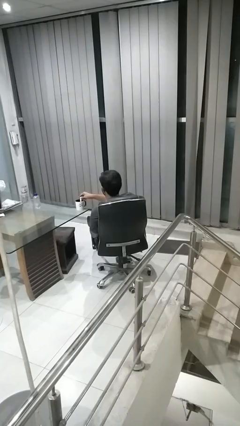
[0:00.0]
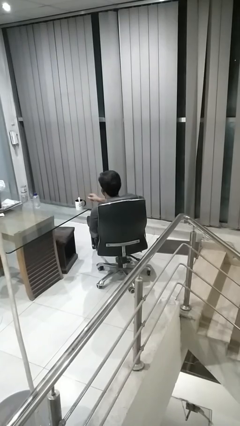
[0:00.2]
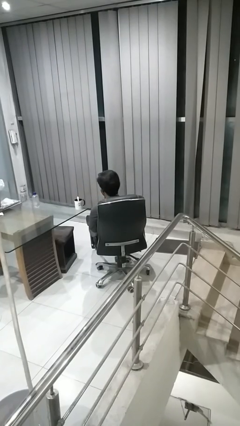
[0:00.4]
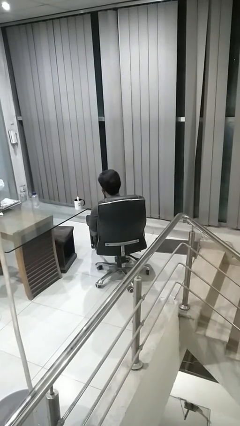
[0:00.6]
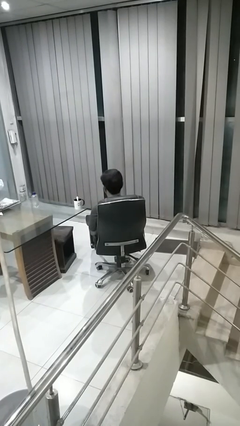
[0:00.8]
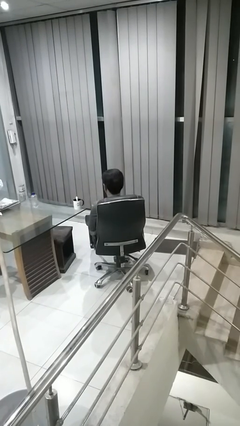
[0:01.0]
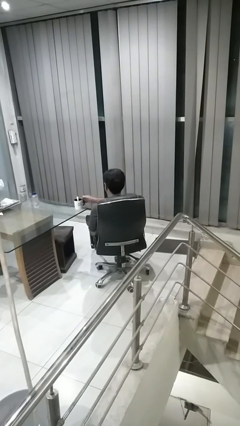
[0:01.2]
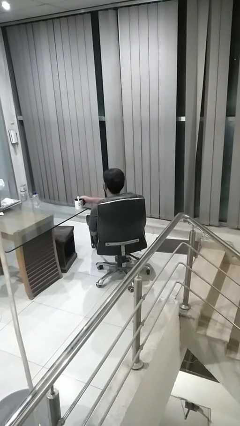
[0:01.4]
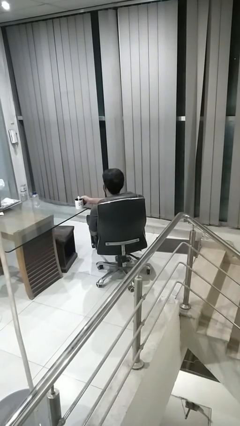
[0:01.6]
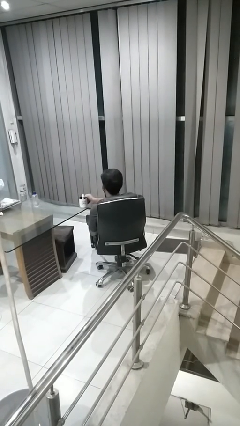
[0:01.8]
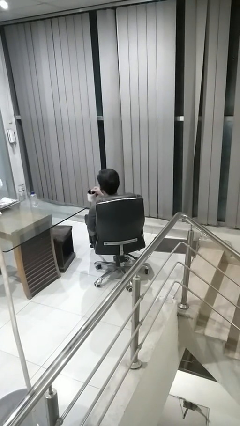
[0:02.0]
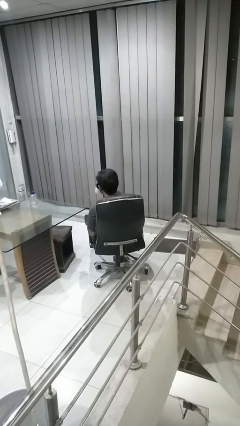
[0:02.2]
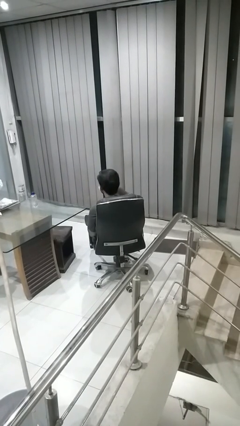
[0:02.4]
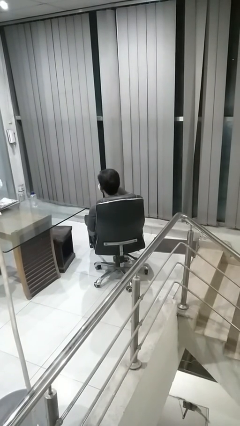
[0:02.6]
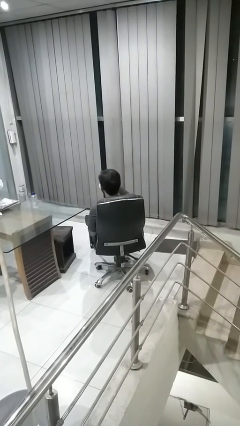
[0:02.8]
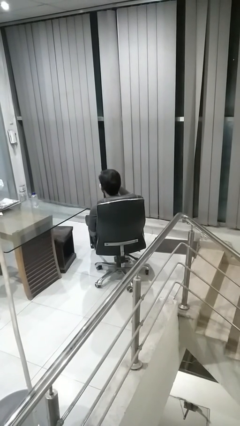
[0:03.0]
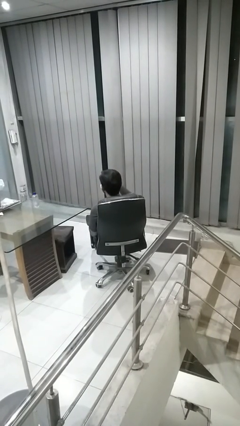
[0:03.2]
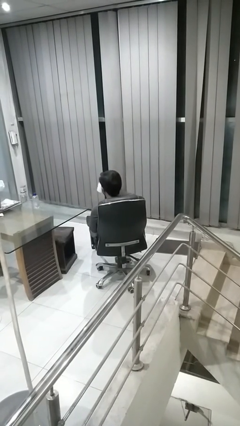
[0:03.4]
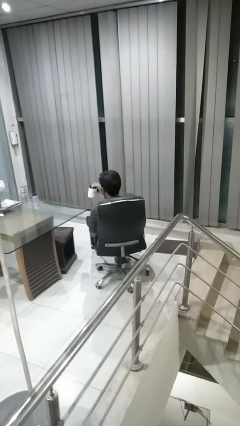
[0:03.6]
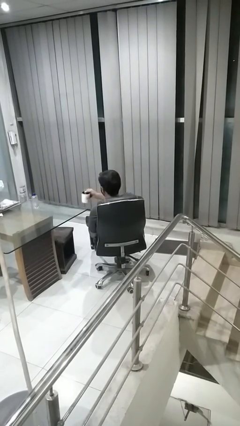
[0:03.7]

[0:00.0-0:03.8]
person drinks from mug

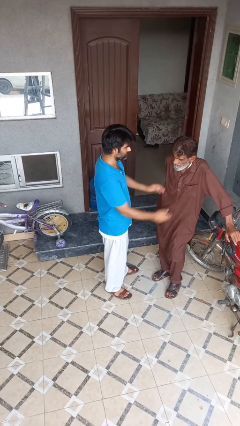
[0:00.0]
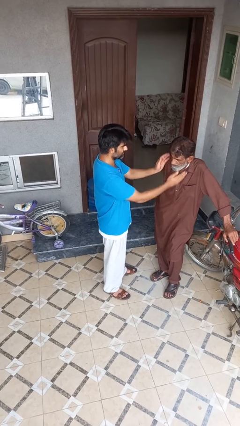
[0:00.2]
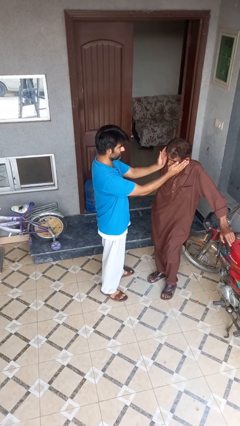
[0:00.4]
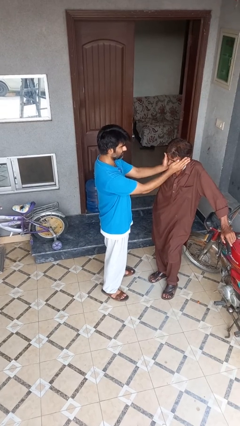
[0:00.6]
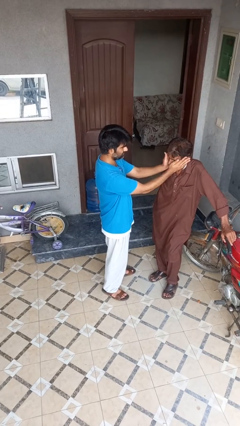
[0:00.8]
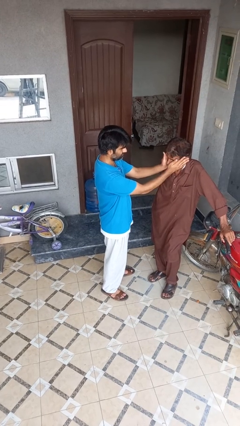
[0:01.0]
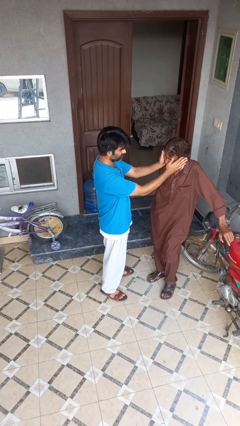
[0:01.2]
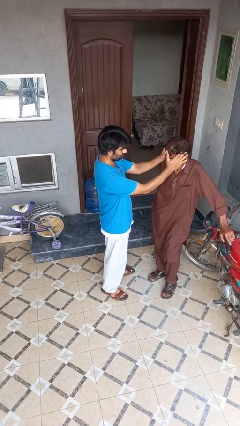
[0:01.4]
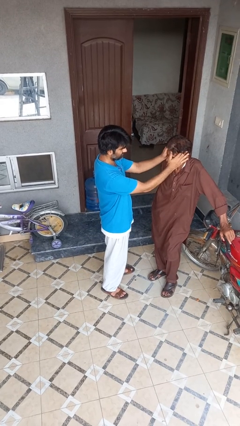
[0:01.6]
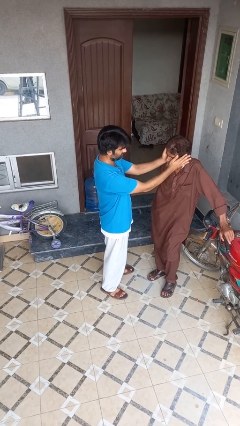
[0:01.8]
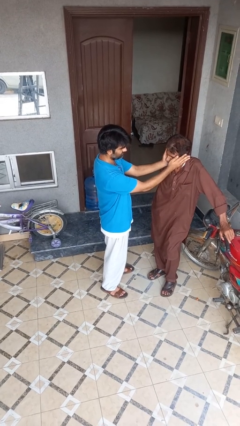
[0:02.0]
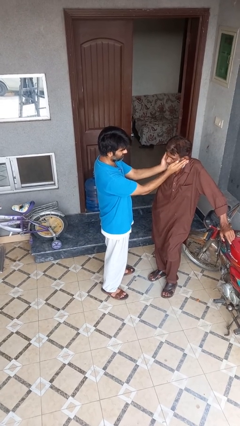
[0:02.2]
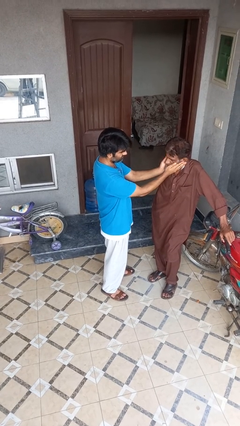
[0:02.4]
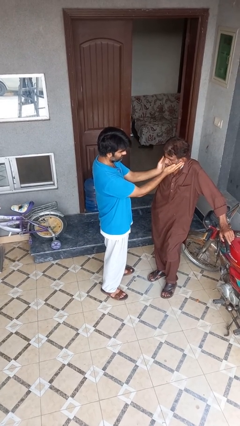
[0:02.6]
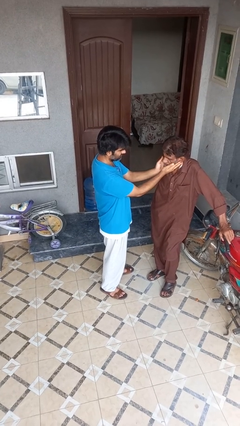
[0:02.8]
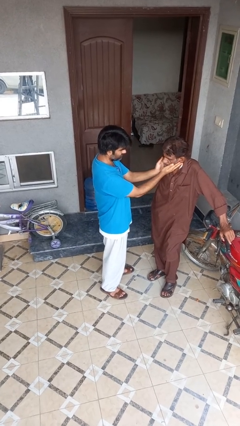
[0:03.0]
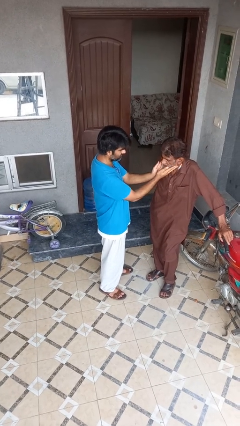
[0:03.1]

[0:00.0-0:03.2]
person touches face of person

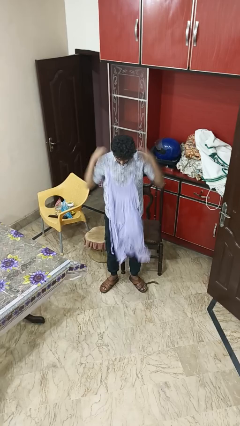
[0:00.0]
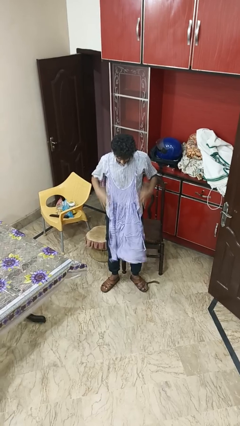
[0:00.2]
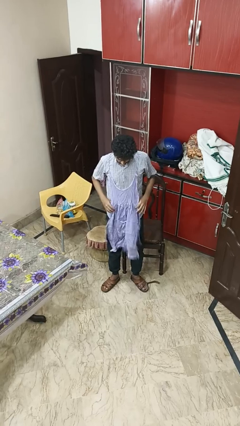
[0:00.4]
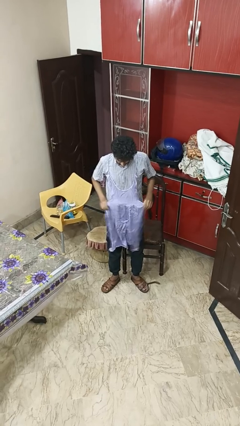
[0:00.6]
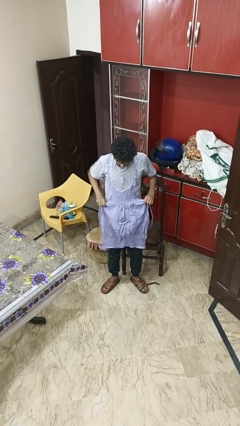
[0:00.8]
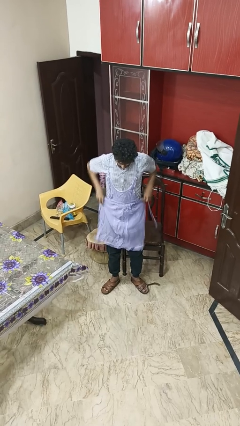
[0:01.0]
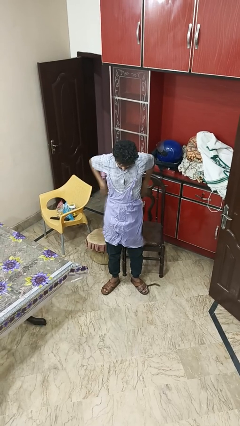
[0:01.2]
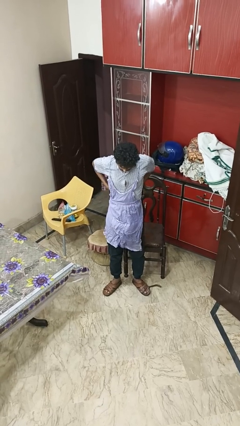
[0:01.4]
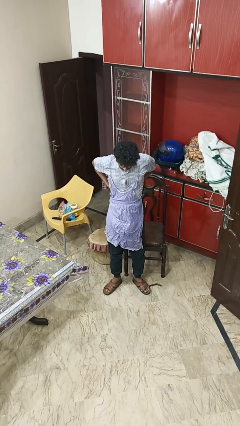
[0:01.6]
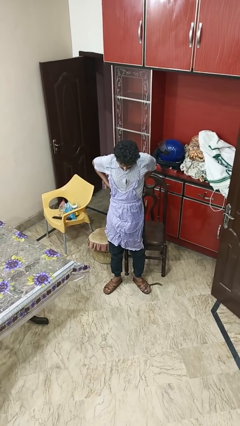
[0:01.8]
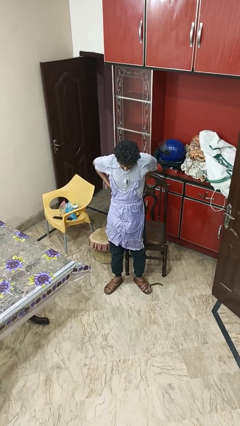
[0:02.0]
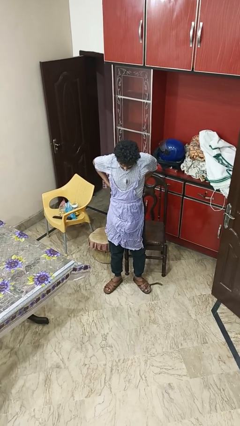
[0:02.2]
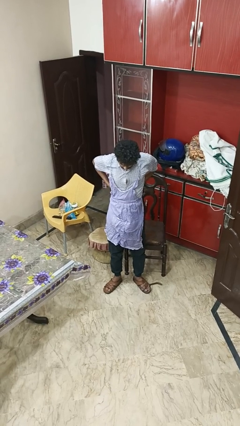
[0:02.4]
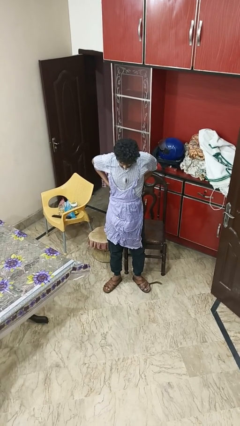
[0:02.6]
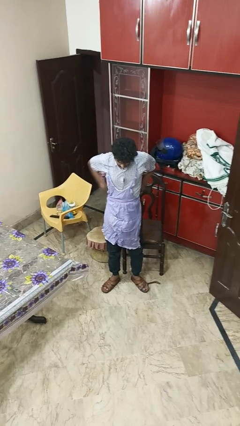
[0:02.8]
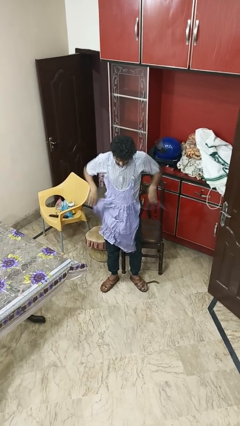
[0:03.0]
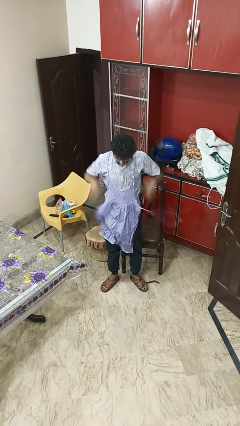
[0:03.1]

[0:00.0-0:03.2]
person puts on apron

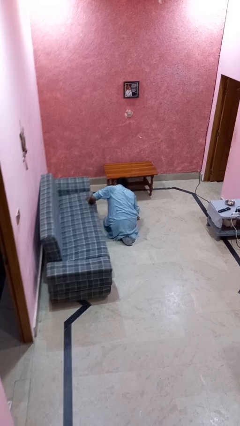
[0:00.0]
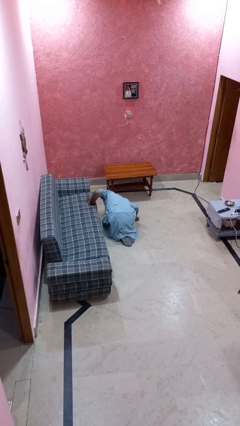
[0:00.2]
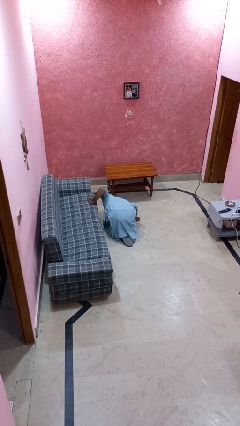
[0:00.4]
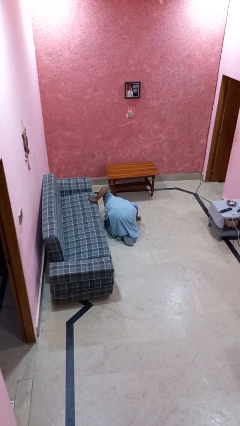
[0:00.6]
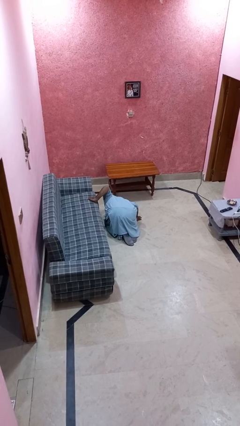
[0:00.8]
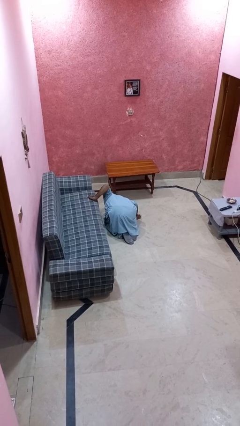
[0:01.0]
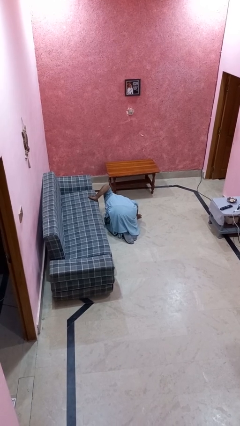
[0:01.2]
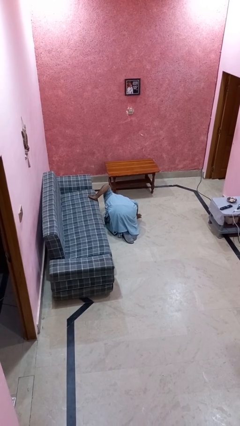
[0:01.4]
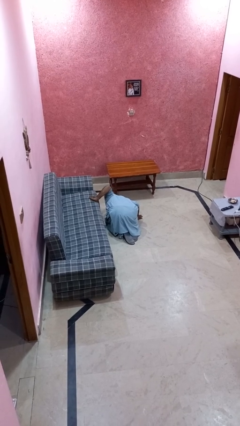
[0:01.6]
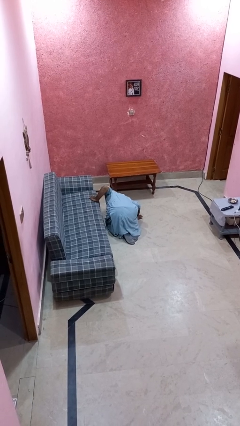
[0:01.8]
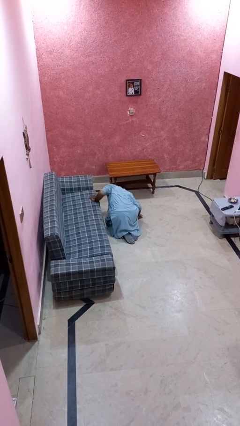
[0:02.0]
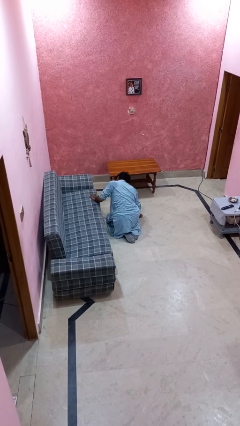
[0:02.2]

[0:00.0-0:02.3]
person searches under couch

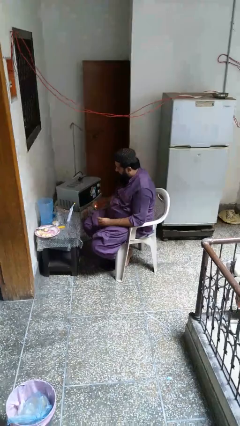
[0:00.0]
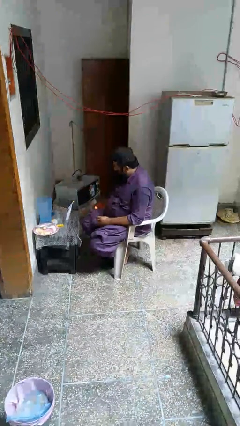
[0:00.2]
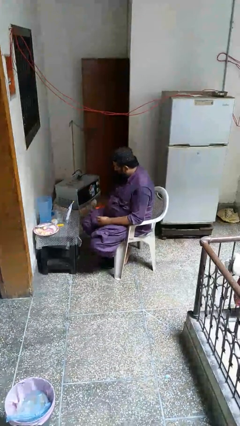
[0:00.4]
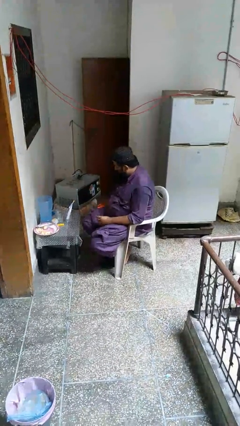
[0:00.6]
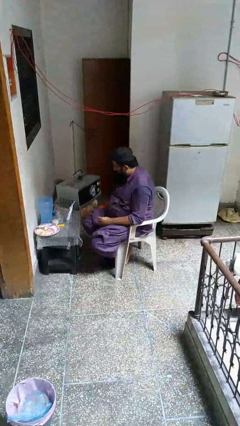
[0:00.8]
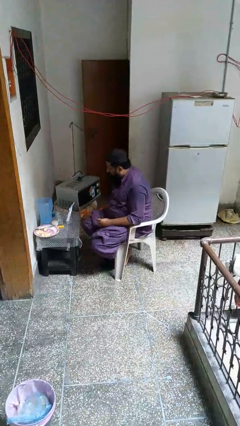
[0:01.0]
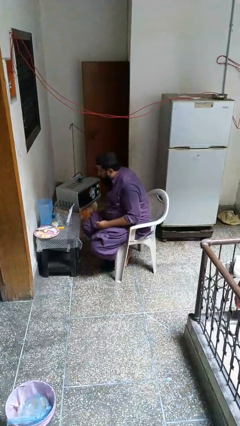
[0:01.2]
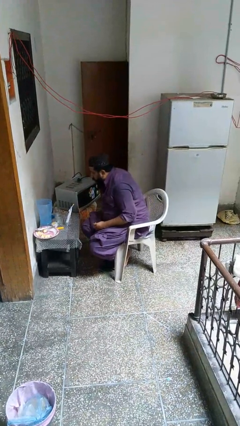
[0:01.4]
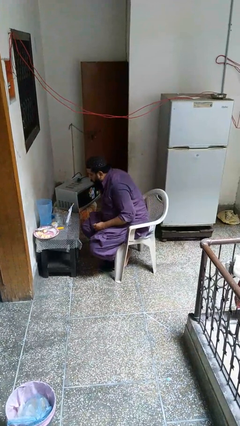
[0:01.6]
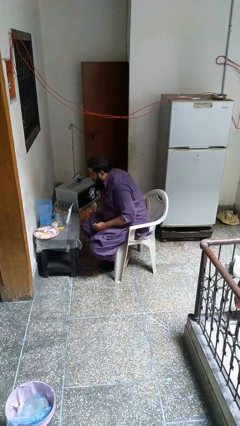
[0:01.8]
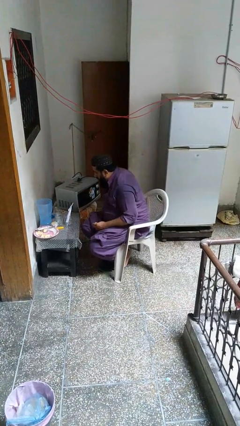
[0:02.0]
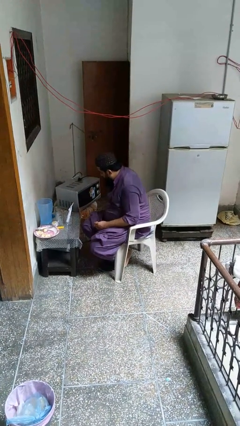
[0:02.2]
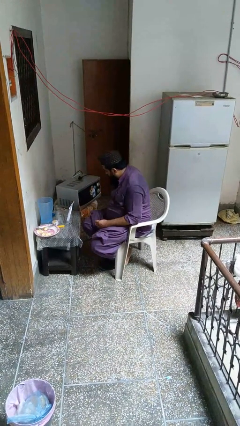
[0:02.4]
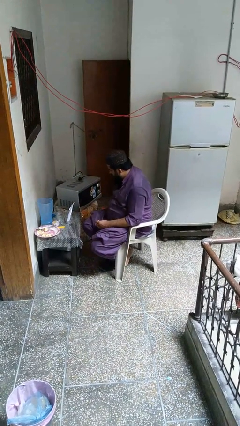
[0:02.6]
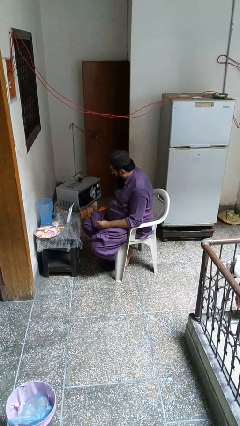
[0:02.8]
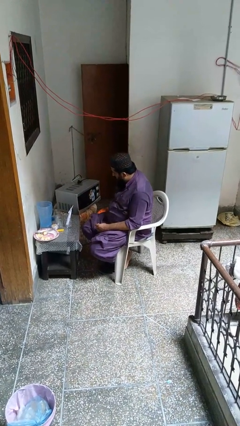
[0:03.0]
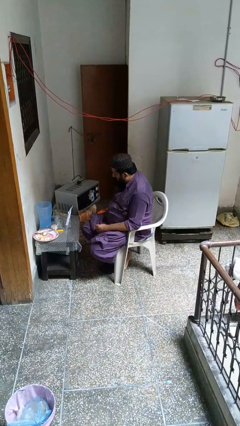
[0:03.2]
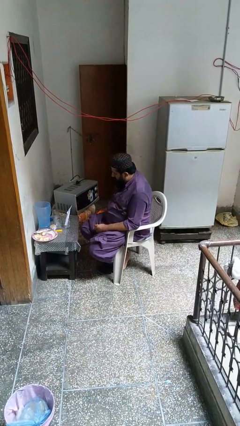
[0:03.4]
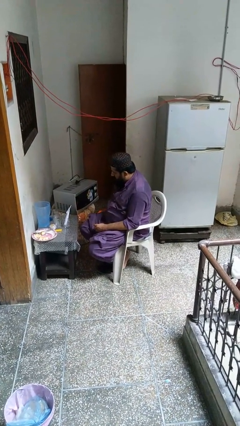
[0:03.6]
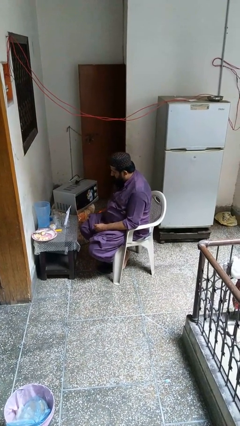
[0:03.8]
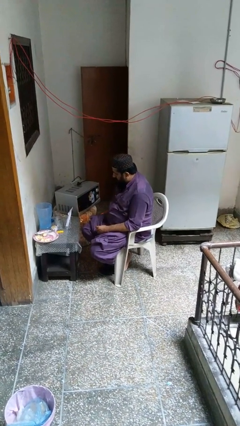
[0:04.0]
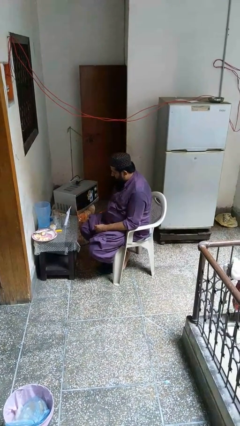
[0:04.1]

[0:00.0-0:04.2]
person extinguishes candle

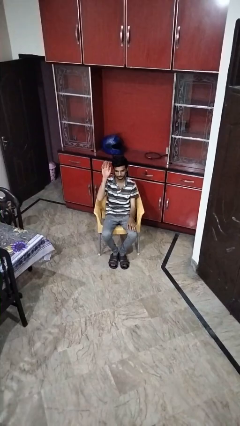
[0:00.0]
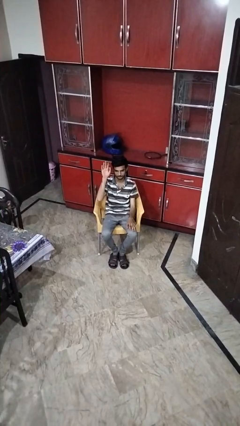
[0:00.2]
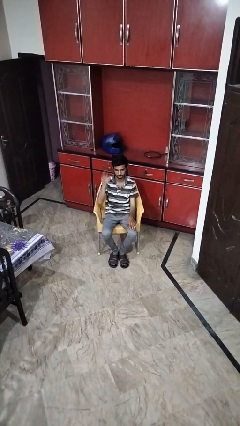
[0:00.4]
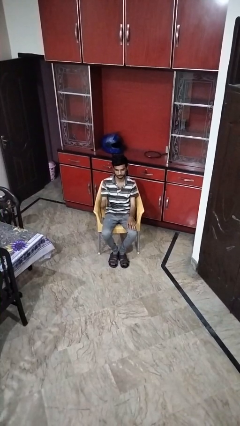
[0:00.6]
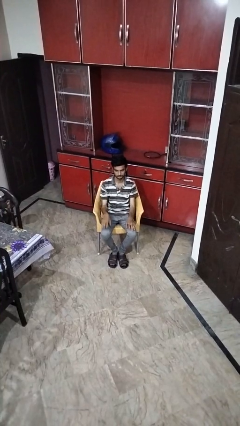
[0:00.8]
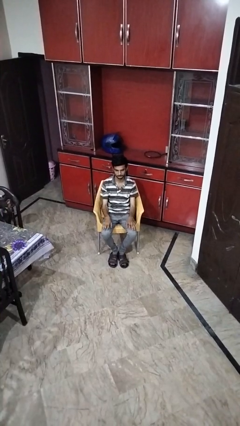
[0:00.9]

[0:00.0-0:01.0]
person gestures lower hand
